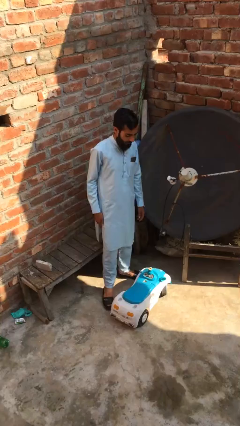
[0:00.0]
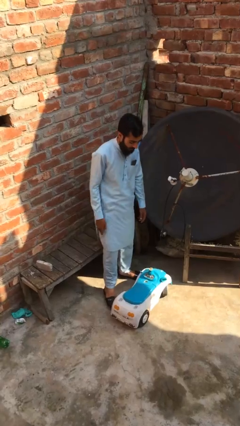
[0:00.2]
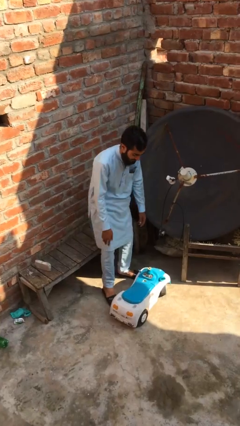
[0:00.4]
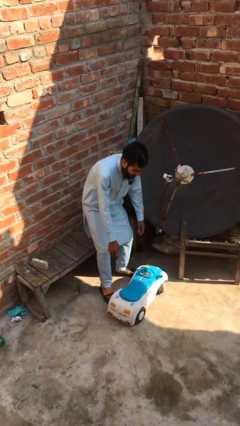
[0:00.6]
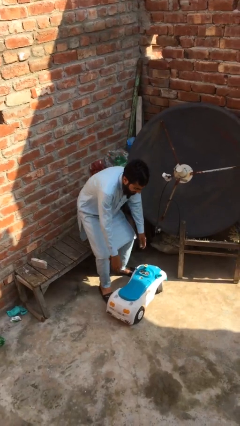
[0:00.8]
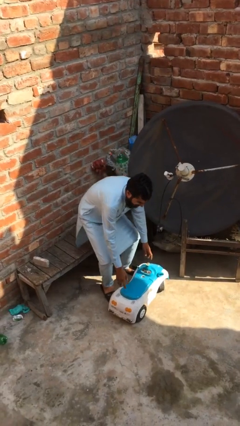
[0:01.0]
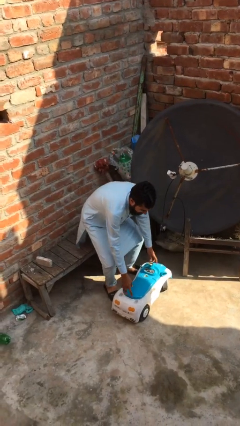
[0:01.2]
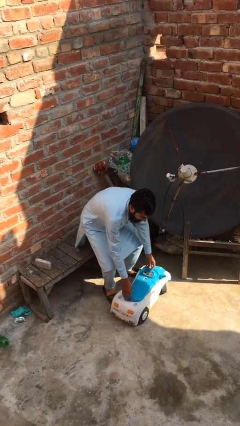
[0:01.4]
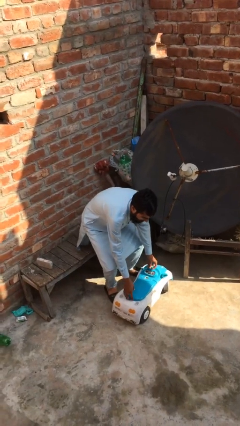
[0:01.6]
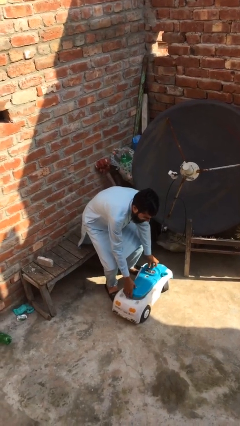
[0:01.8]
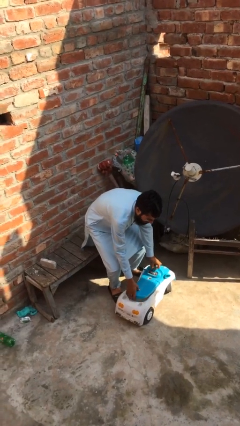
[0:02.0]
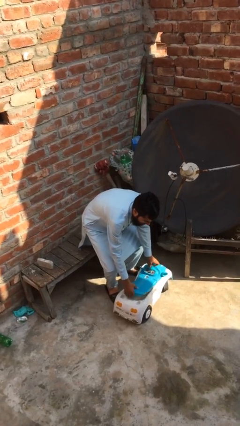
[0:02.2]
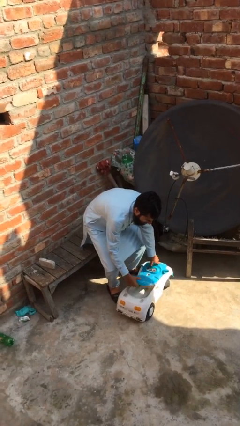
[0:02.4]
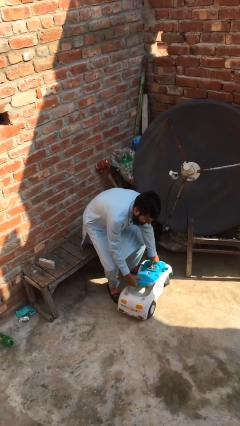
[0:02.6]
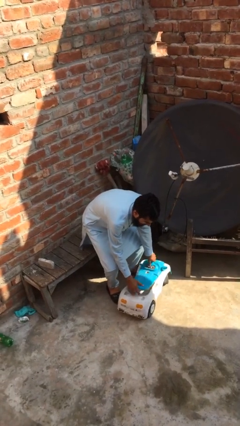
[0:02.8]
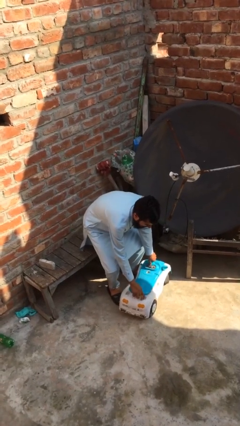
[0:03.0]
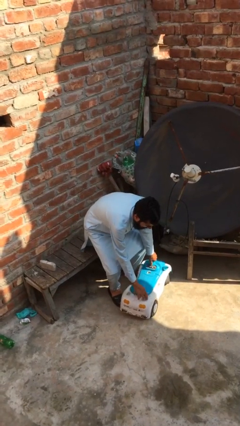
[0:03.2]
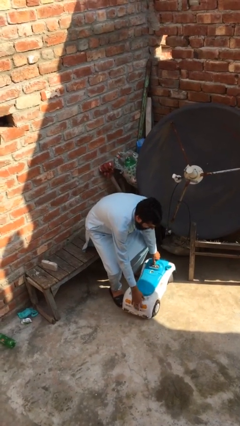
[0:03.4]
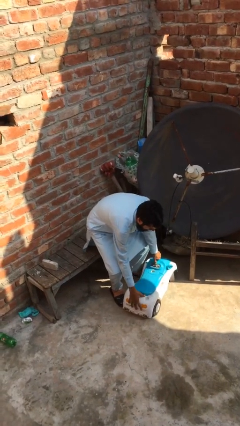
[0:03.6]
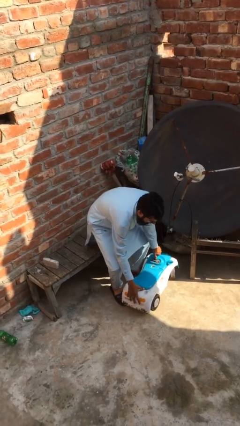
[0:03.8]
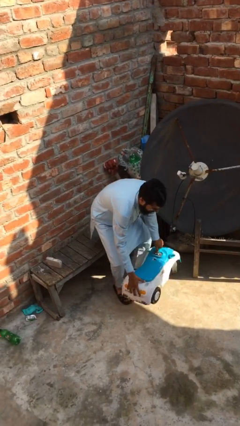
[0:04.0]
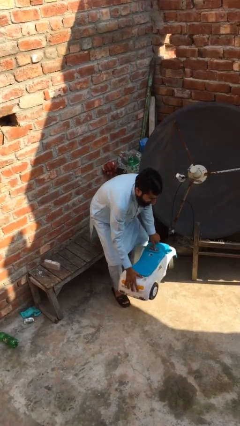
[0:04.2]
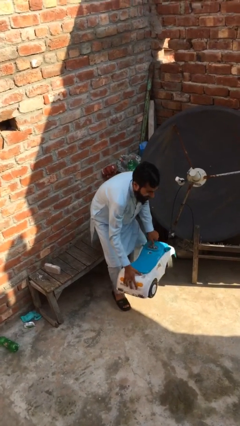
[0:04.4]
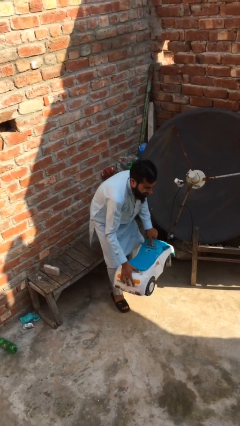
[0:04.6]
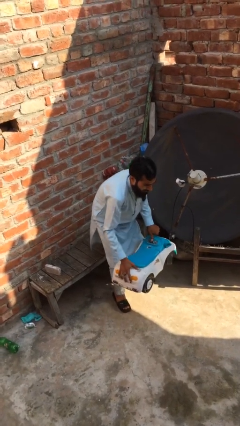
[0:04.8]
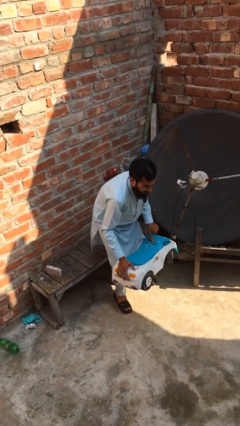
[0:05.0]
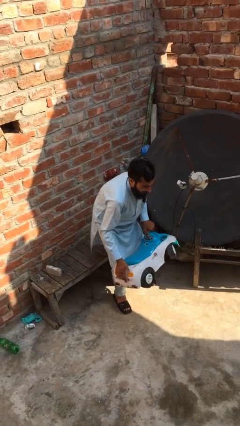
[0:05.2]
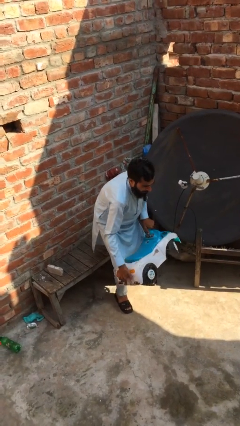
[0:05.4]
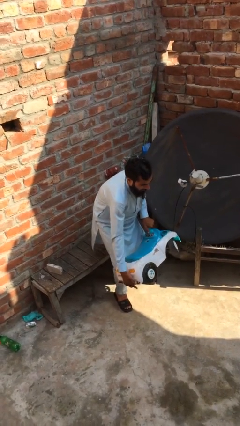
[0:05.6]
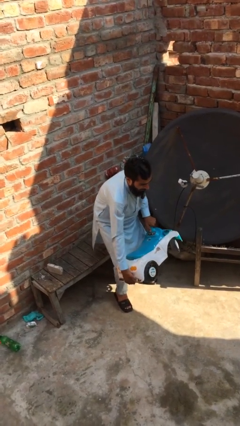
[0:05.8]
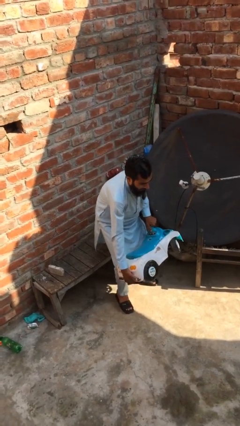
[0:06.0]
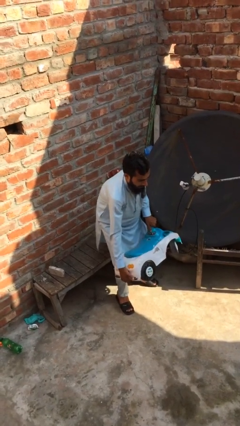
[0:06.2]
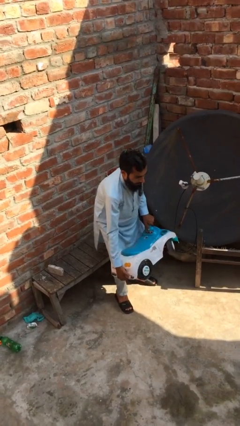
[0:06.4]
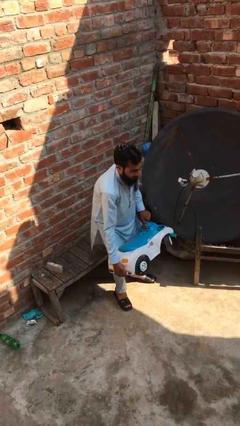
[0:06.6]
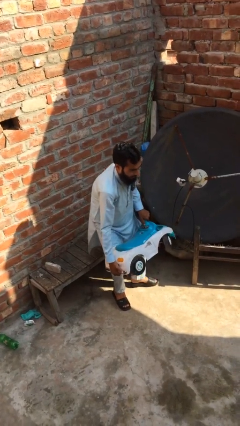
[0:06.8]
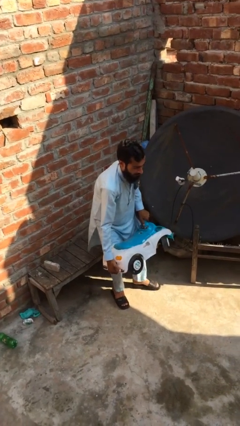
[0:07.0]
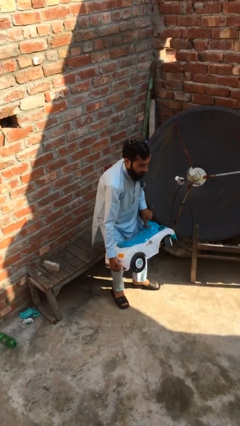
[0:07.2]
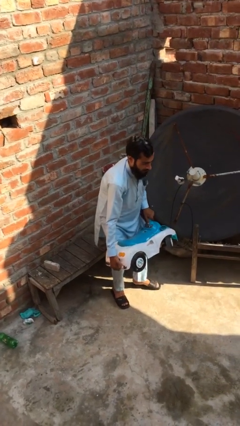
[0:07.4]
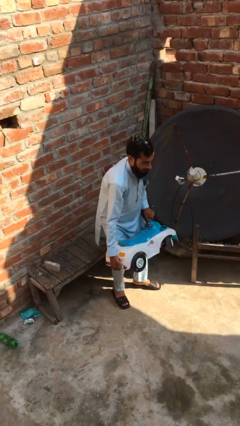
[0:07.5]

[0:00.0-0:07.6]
person picks up object from floor

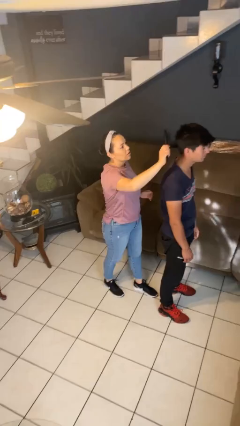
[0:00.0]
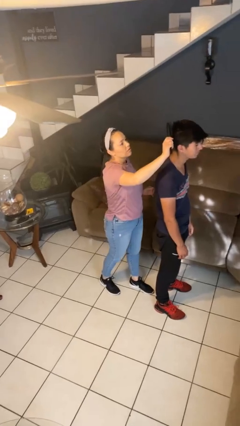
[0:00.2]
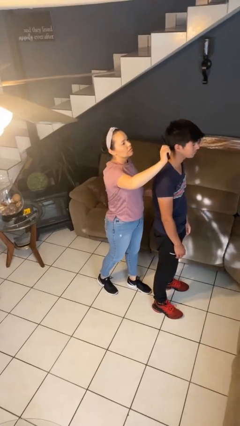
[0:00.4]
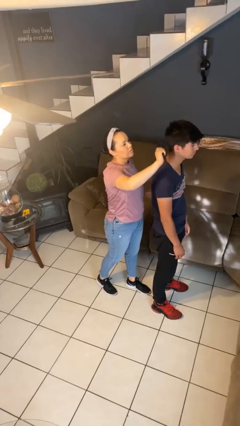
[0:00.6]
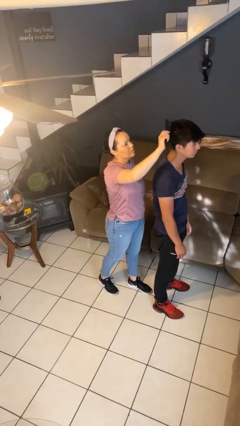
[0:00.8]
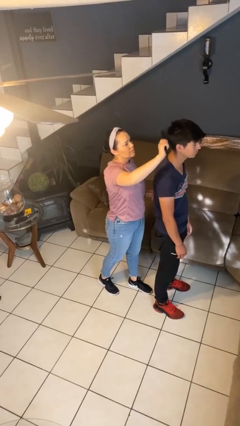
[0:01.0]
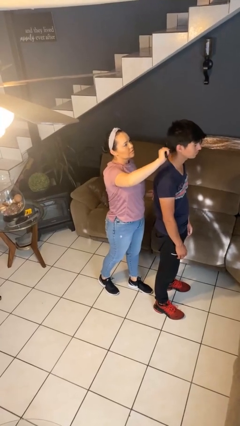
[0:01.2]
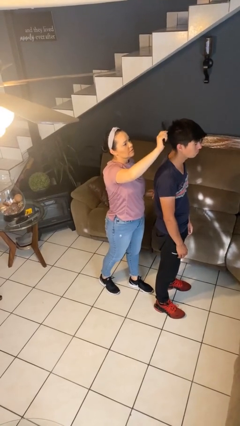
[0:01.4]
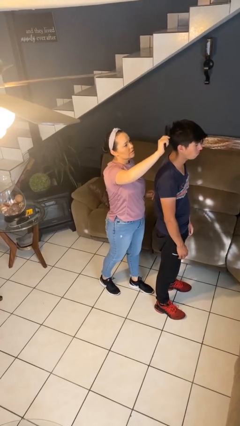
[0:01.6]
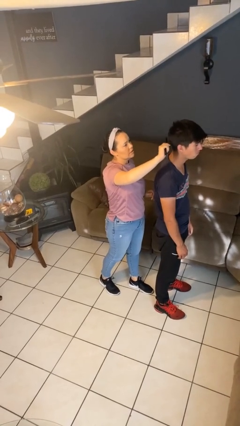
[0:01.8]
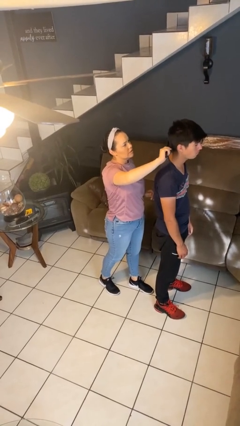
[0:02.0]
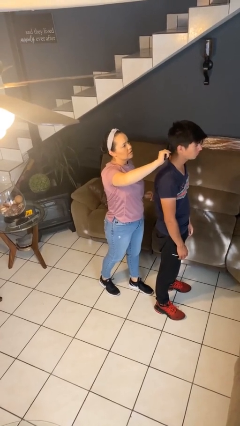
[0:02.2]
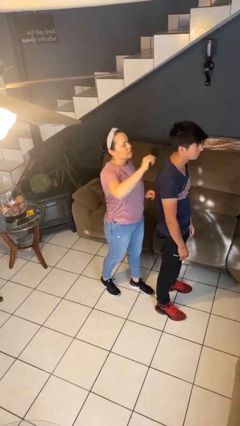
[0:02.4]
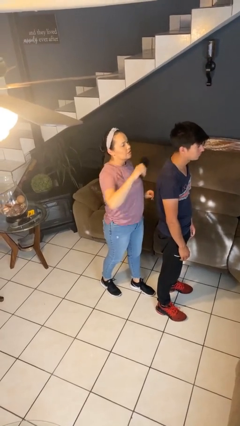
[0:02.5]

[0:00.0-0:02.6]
person brushes hair of person

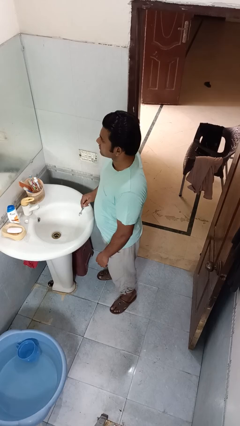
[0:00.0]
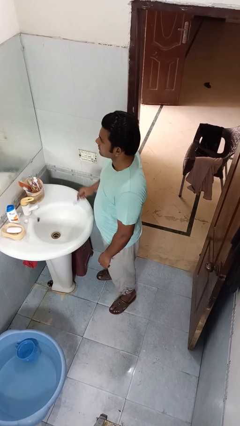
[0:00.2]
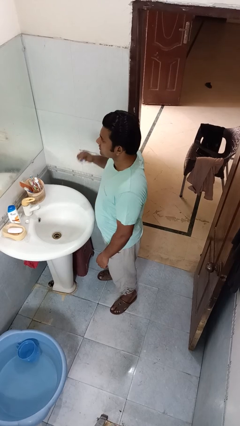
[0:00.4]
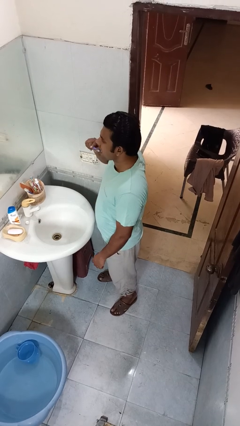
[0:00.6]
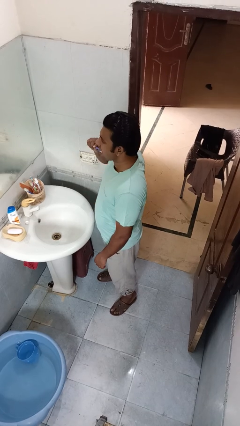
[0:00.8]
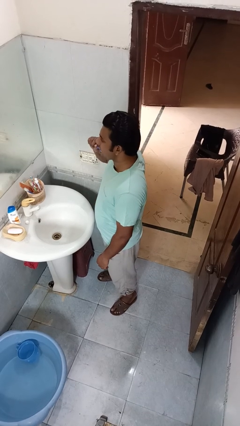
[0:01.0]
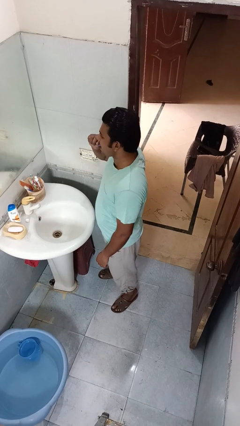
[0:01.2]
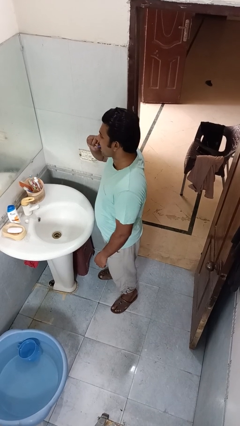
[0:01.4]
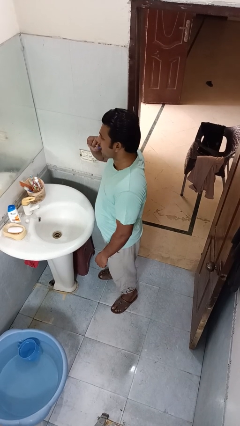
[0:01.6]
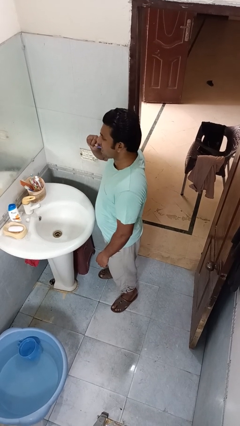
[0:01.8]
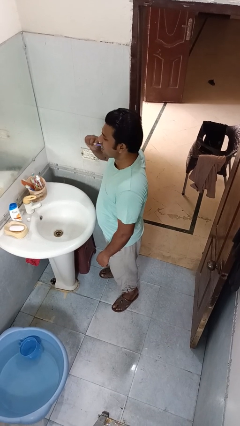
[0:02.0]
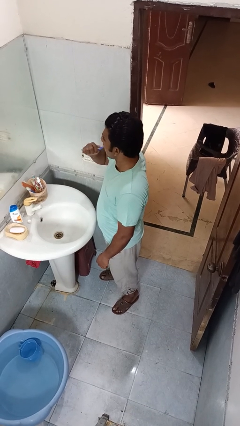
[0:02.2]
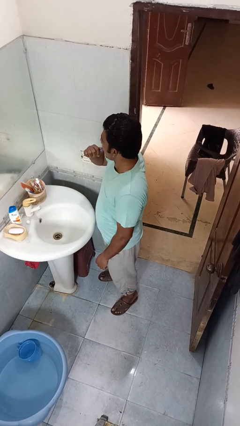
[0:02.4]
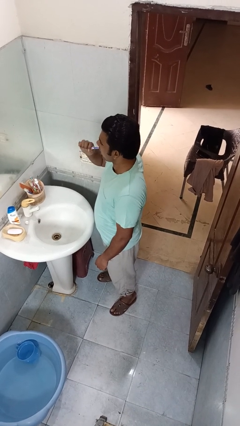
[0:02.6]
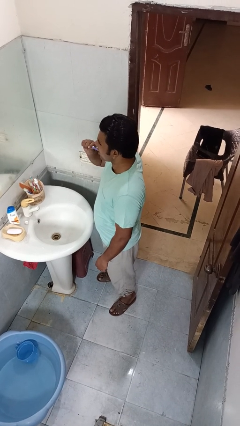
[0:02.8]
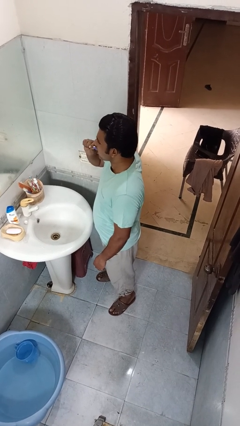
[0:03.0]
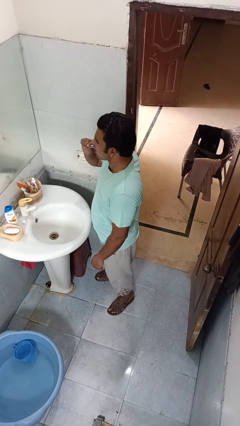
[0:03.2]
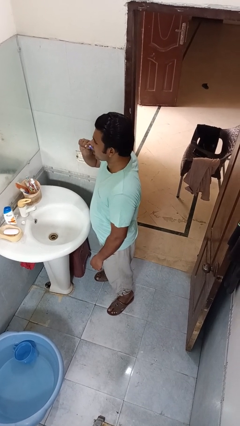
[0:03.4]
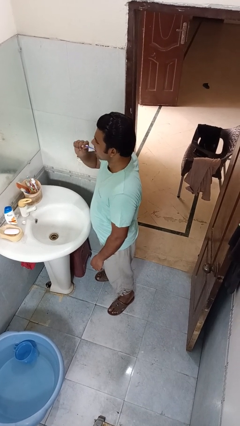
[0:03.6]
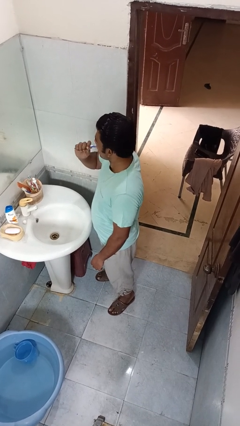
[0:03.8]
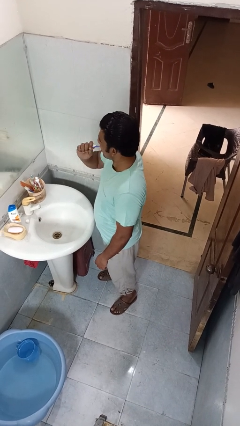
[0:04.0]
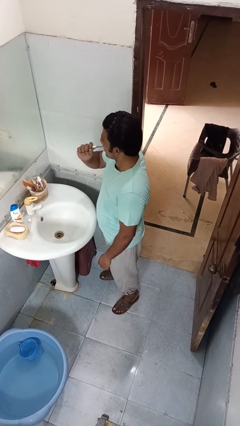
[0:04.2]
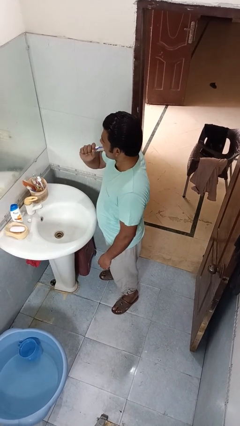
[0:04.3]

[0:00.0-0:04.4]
person brushes teeth

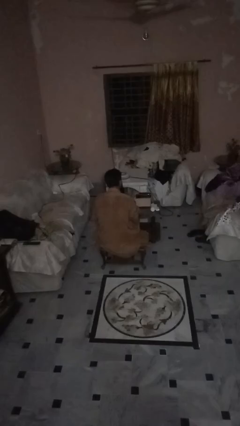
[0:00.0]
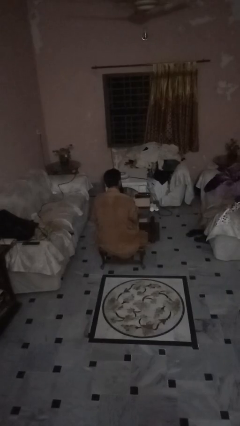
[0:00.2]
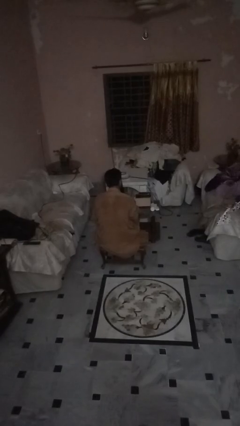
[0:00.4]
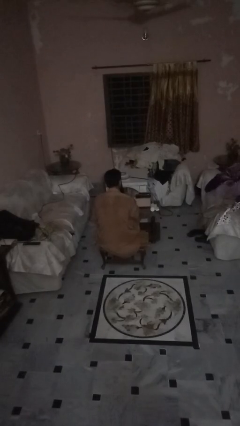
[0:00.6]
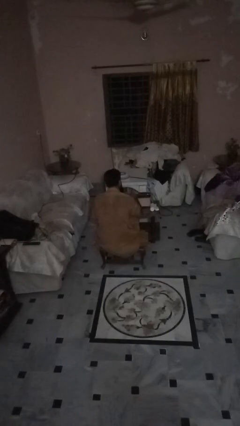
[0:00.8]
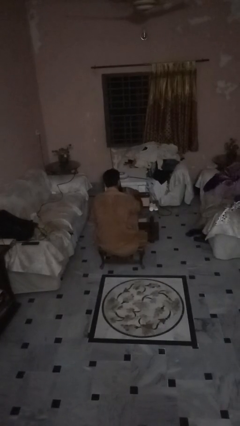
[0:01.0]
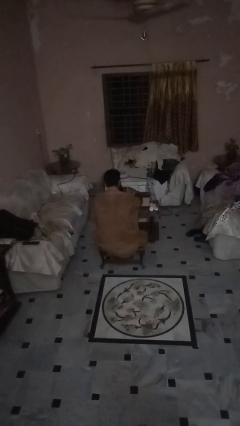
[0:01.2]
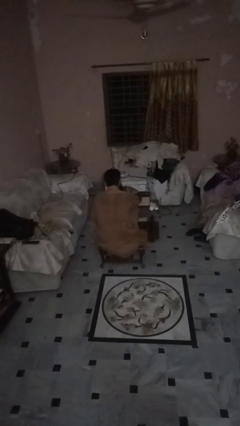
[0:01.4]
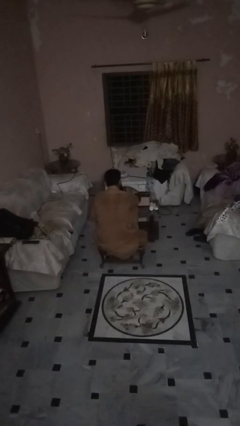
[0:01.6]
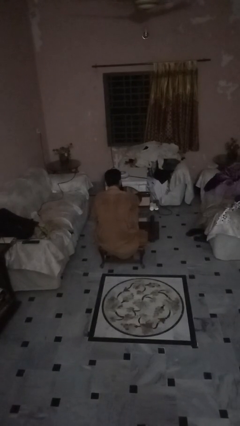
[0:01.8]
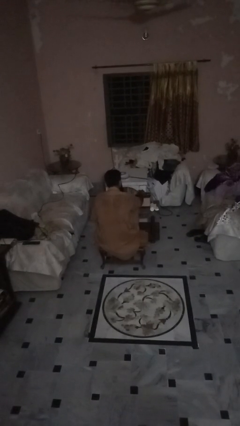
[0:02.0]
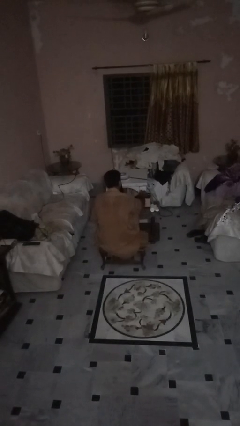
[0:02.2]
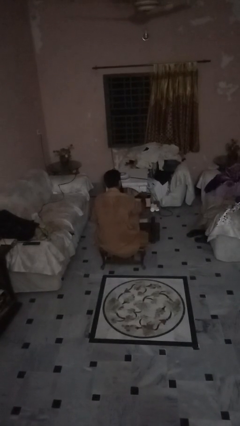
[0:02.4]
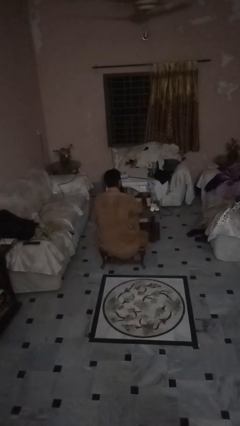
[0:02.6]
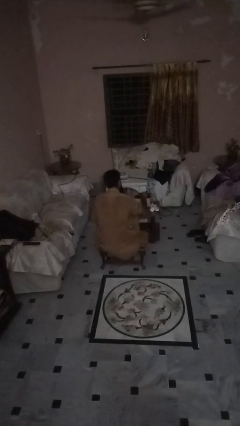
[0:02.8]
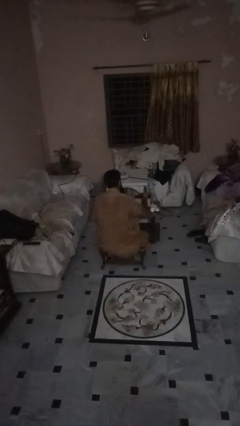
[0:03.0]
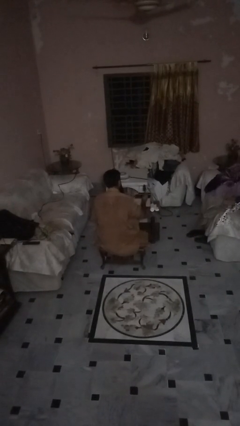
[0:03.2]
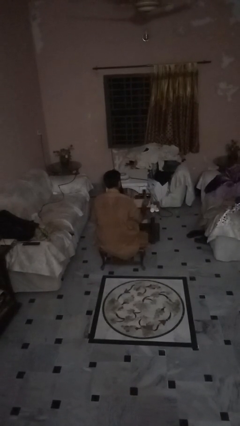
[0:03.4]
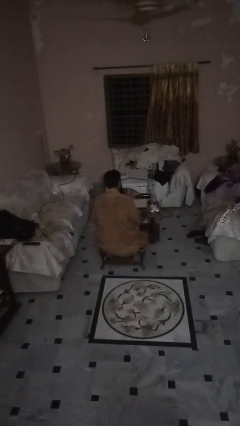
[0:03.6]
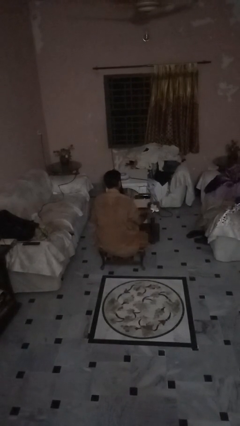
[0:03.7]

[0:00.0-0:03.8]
person unloads box onto table
